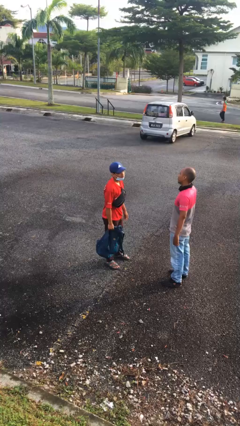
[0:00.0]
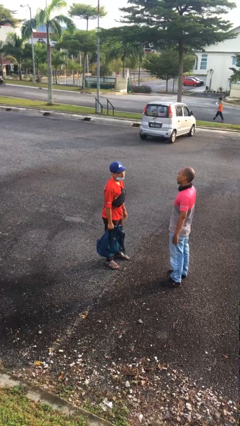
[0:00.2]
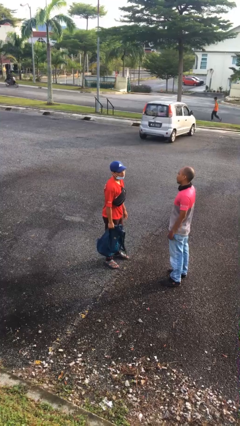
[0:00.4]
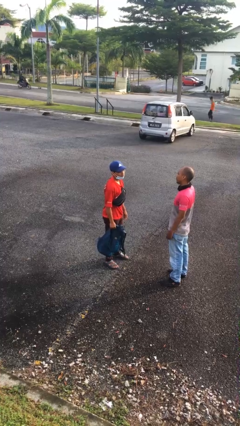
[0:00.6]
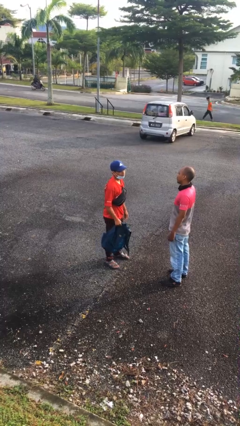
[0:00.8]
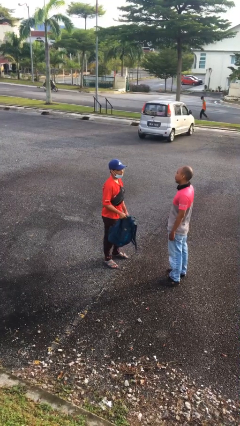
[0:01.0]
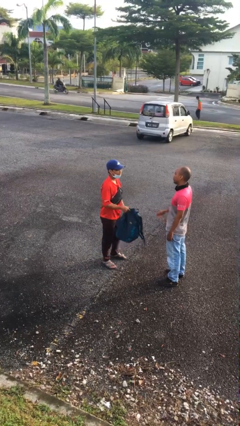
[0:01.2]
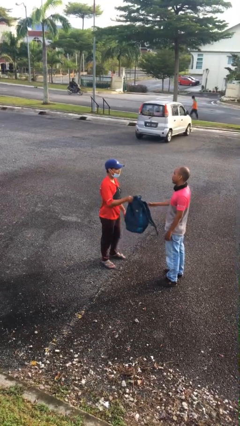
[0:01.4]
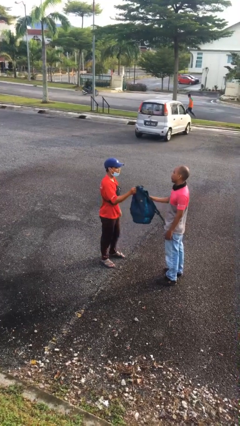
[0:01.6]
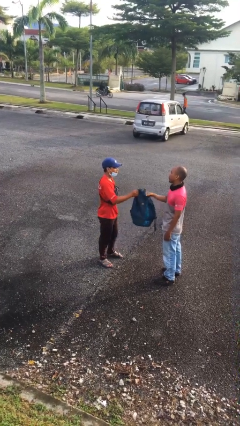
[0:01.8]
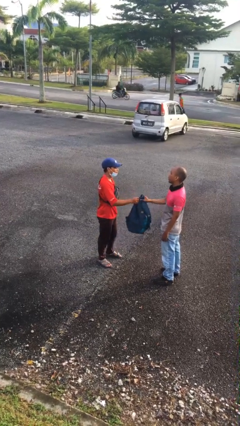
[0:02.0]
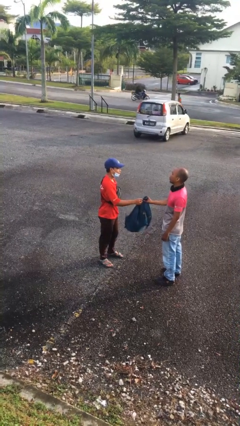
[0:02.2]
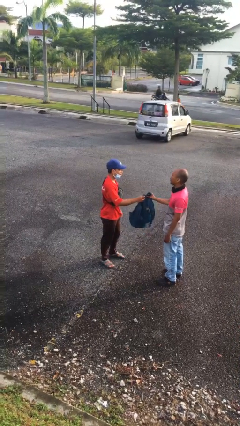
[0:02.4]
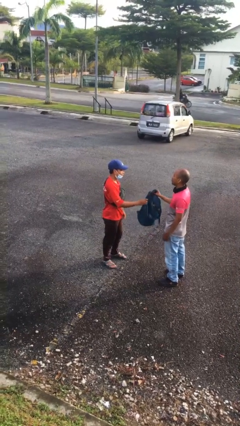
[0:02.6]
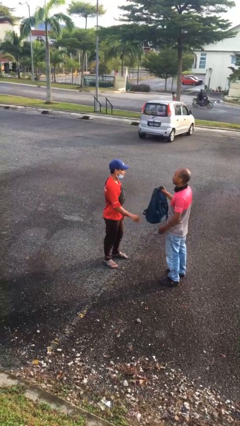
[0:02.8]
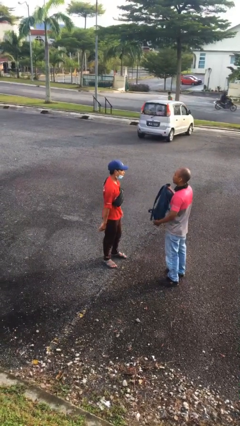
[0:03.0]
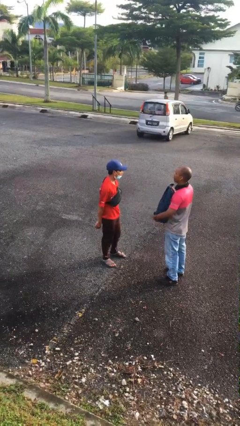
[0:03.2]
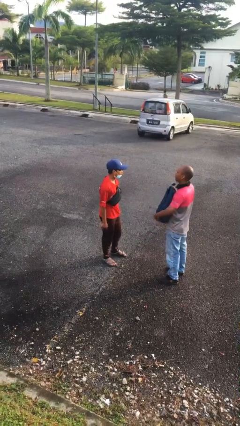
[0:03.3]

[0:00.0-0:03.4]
person transfers object to person

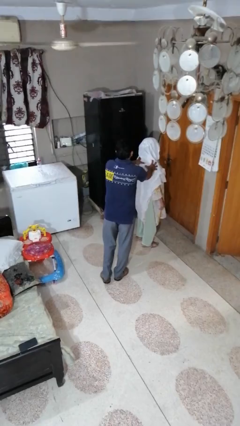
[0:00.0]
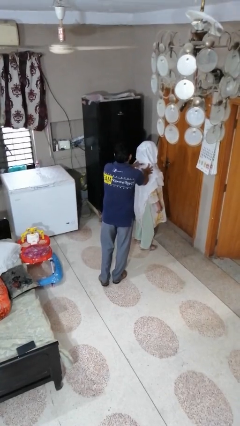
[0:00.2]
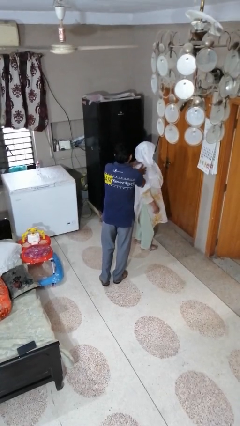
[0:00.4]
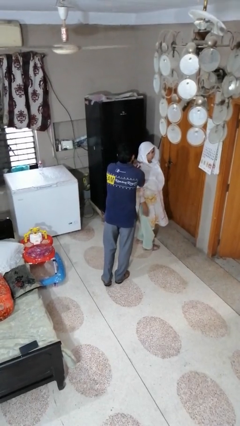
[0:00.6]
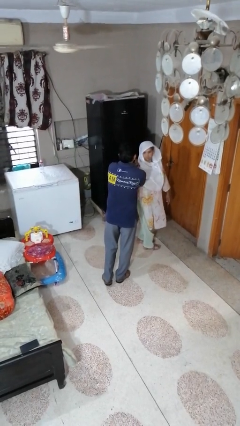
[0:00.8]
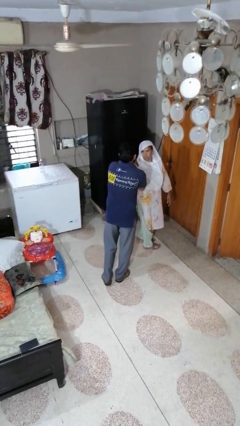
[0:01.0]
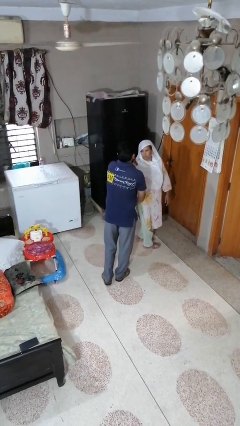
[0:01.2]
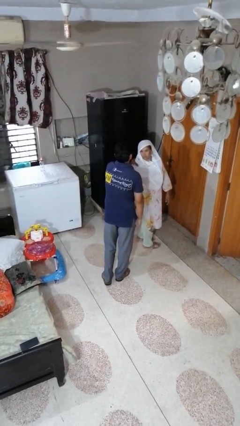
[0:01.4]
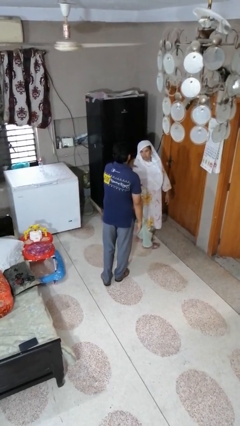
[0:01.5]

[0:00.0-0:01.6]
person spins person around

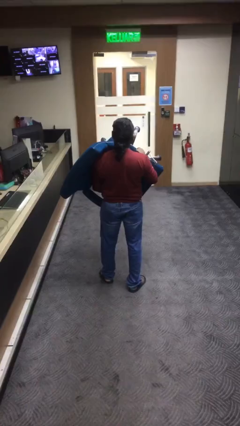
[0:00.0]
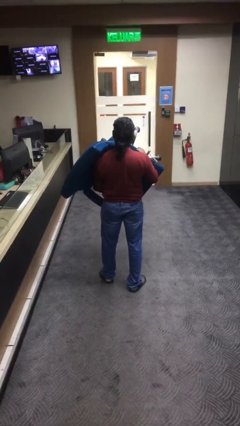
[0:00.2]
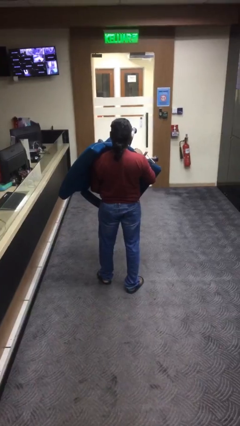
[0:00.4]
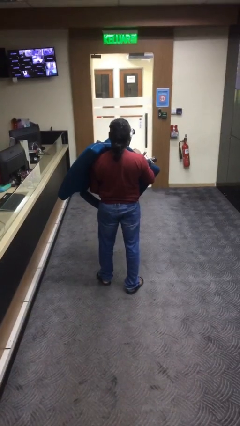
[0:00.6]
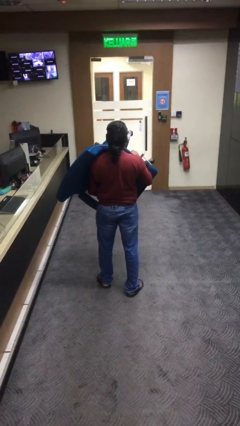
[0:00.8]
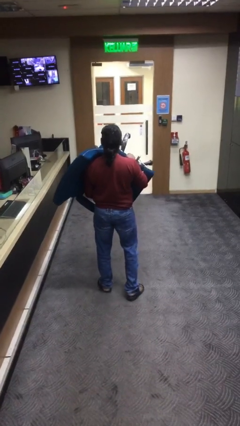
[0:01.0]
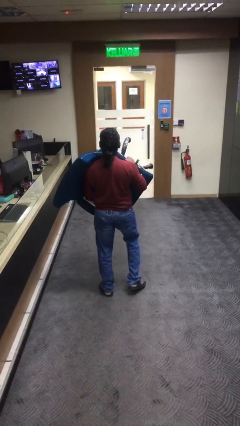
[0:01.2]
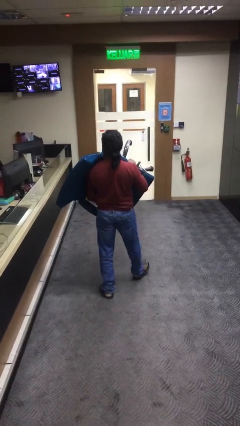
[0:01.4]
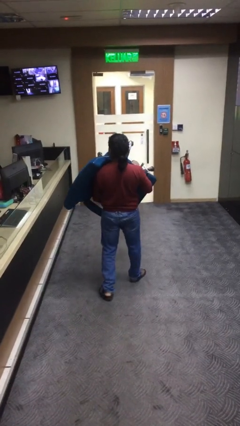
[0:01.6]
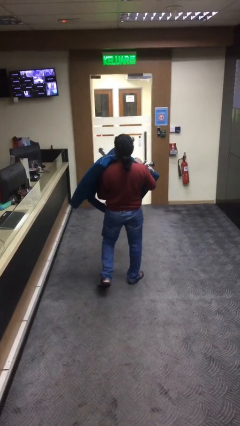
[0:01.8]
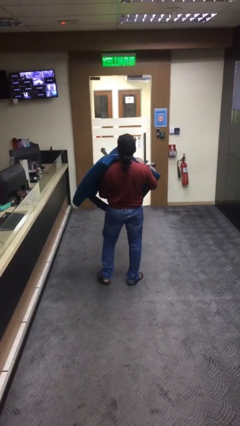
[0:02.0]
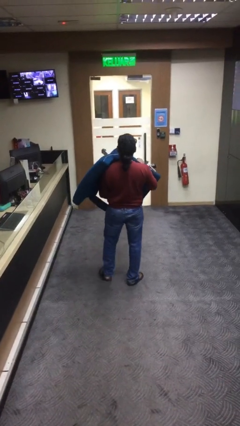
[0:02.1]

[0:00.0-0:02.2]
person carries furniture

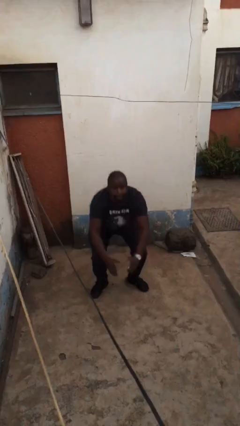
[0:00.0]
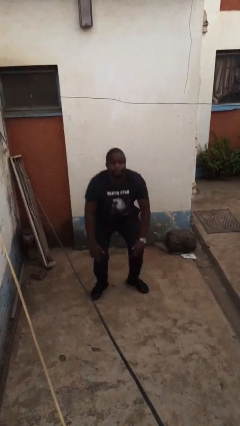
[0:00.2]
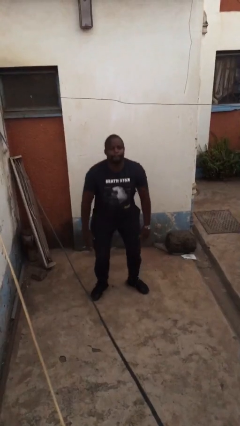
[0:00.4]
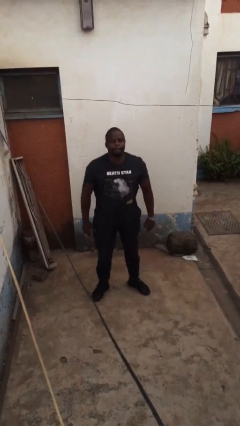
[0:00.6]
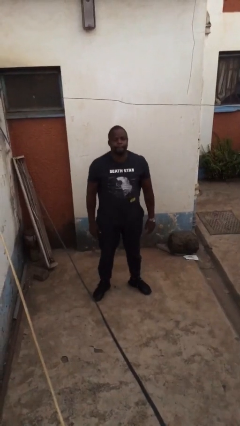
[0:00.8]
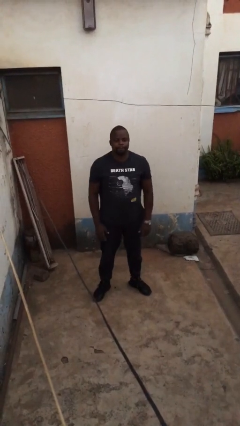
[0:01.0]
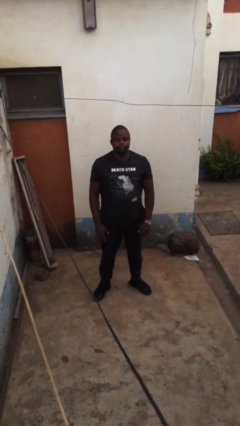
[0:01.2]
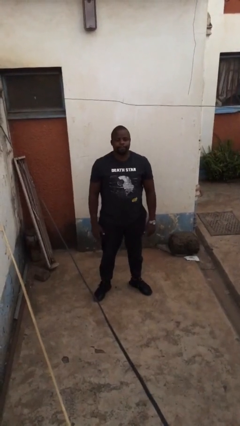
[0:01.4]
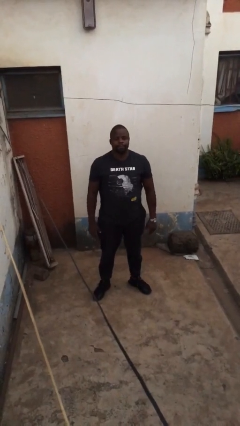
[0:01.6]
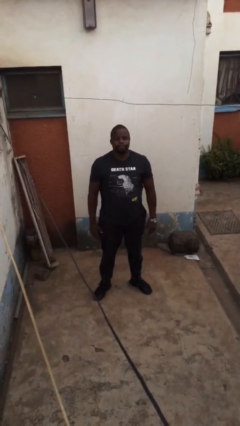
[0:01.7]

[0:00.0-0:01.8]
person stands up

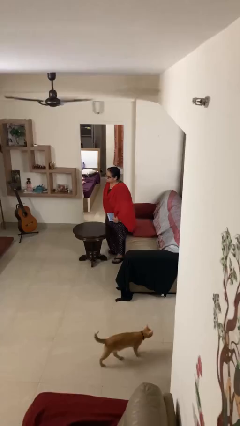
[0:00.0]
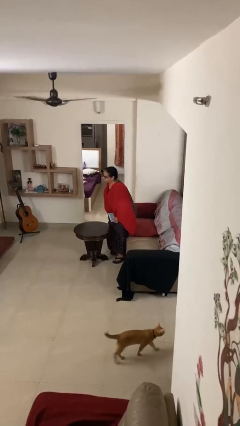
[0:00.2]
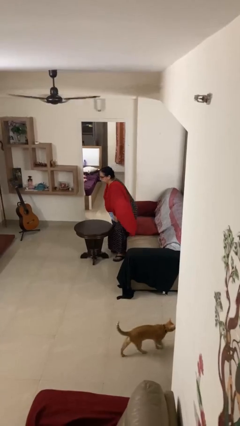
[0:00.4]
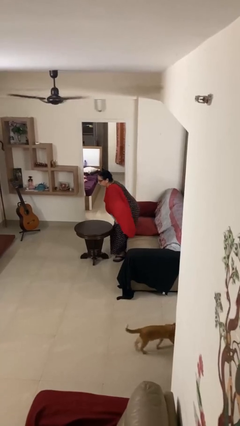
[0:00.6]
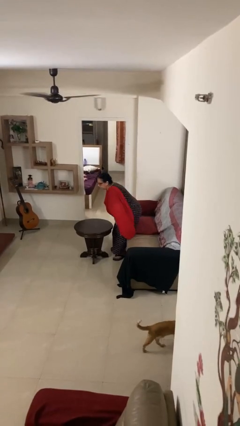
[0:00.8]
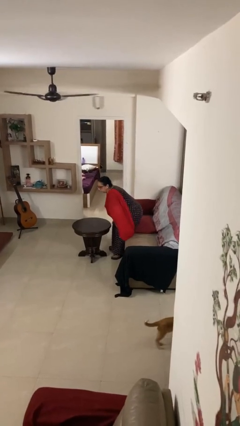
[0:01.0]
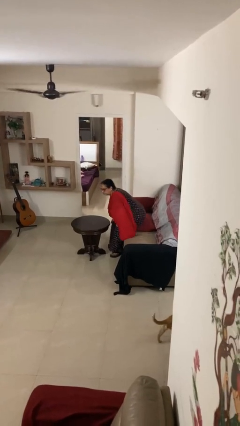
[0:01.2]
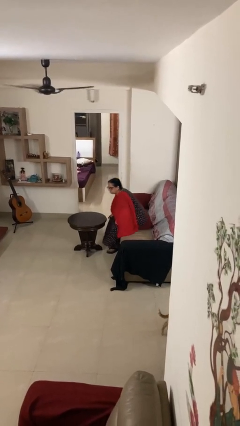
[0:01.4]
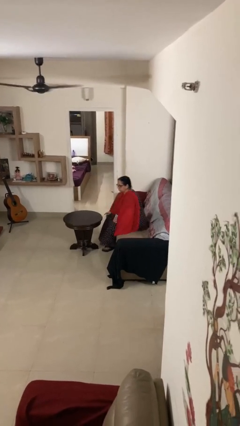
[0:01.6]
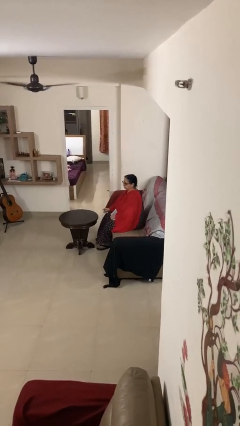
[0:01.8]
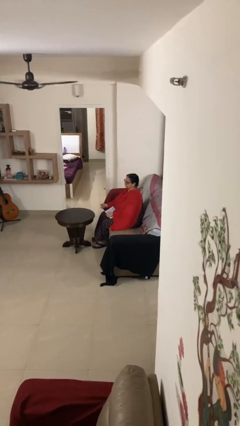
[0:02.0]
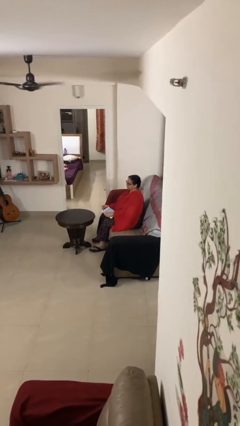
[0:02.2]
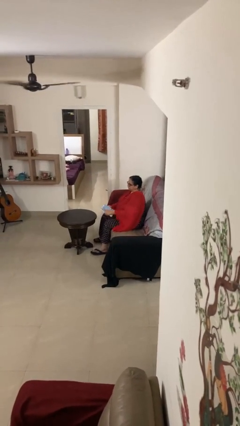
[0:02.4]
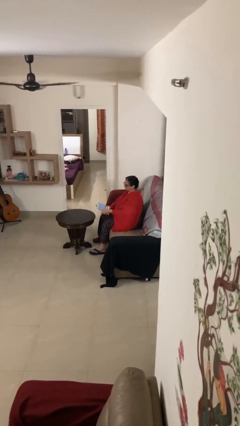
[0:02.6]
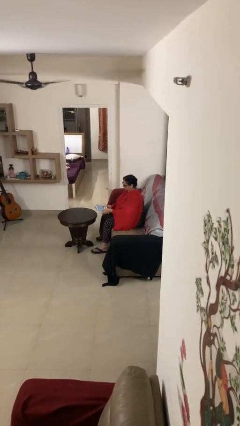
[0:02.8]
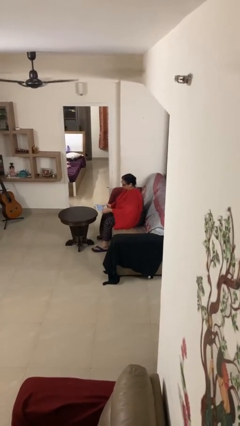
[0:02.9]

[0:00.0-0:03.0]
person sits down

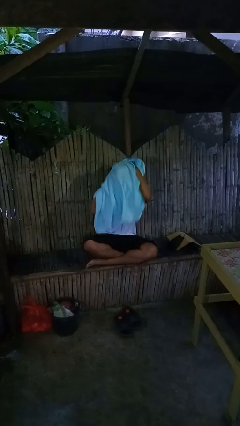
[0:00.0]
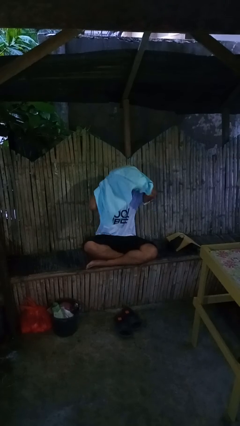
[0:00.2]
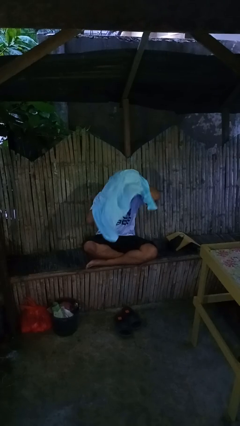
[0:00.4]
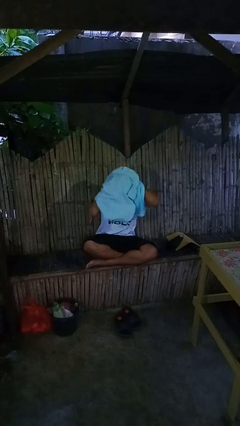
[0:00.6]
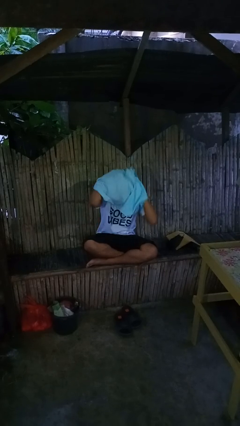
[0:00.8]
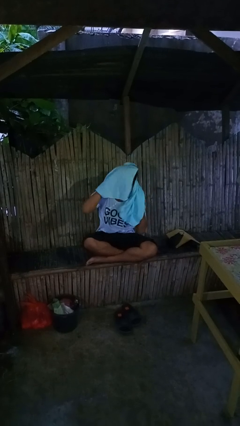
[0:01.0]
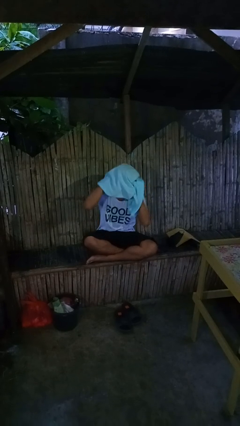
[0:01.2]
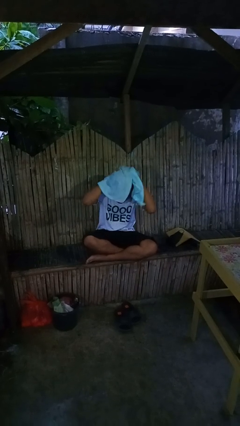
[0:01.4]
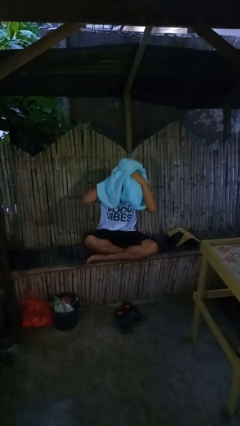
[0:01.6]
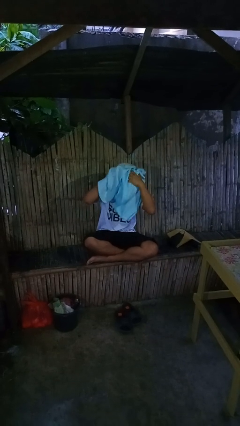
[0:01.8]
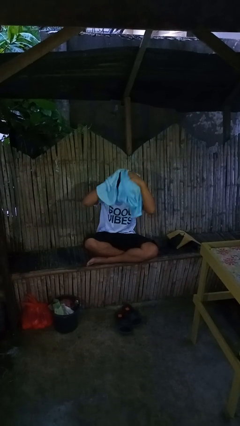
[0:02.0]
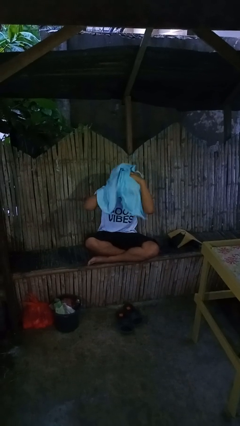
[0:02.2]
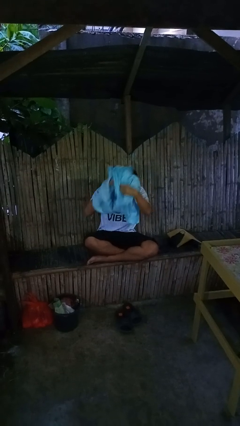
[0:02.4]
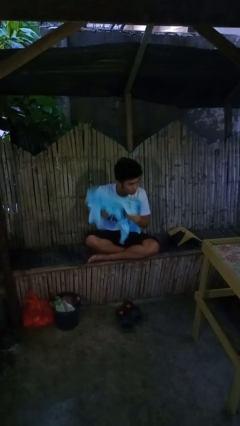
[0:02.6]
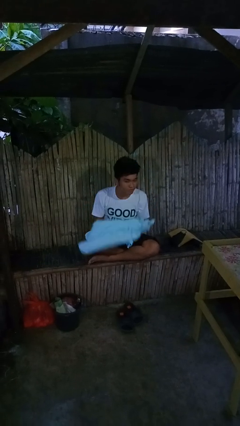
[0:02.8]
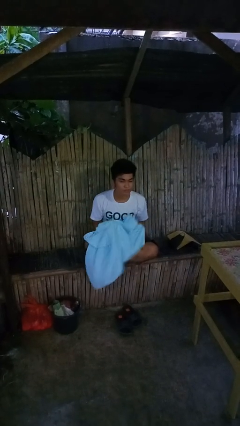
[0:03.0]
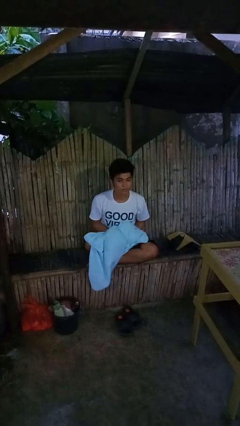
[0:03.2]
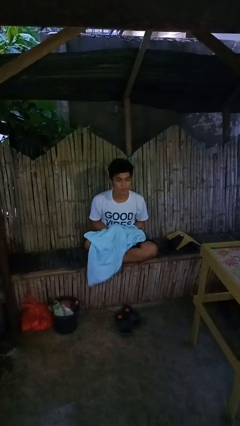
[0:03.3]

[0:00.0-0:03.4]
person dries hair with towel

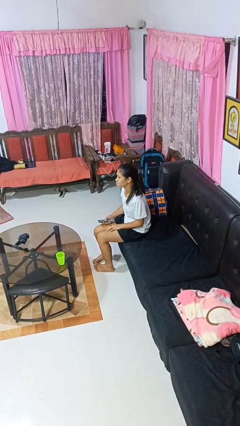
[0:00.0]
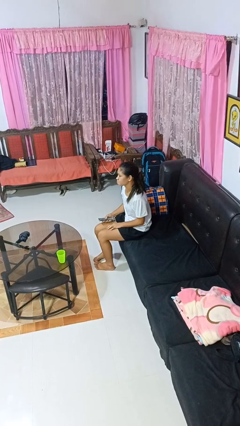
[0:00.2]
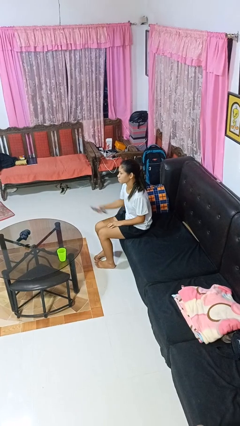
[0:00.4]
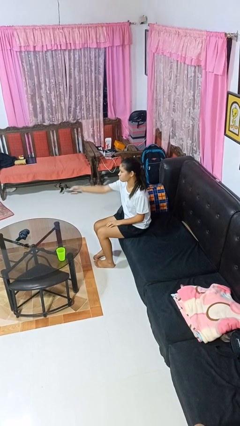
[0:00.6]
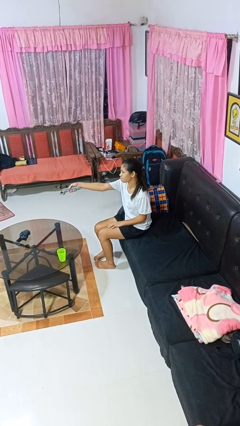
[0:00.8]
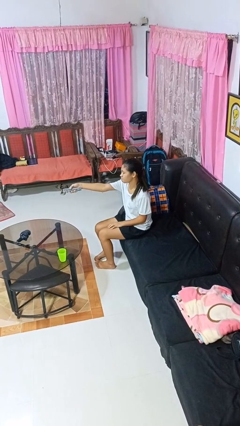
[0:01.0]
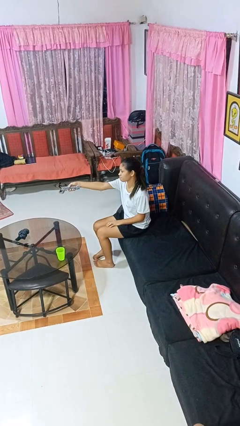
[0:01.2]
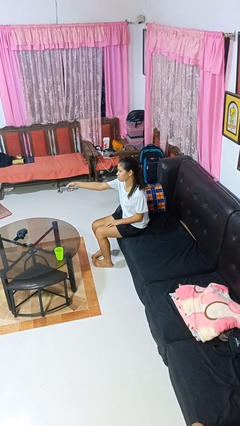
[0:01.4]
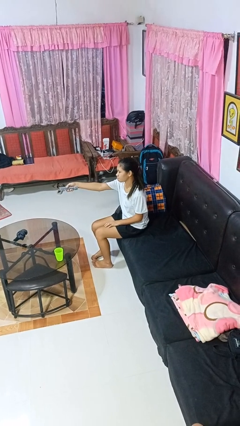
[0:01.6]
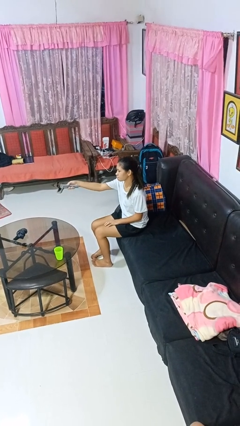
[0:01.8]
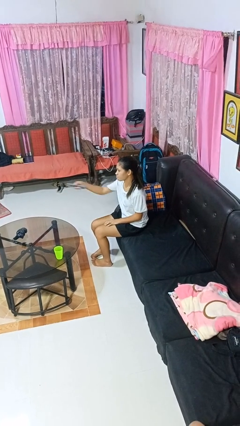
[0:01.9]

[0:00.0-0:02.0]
person uses television remote
